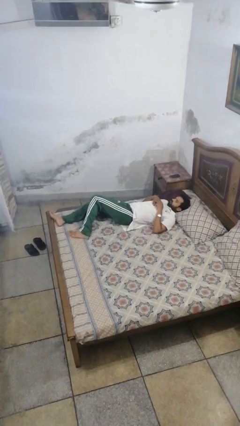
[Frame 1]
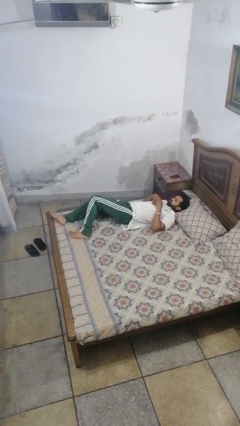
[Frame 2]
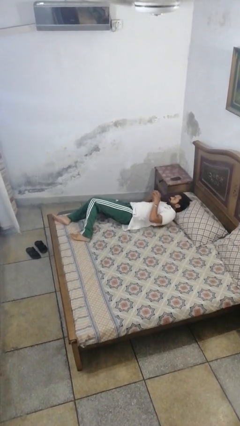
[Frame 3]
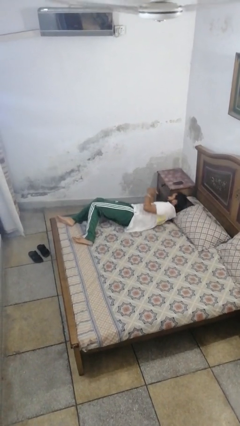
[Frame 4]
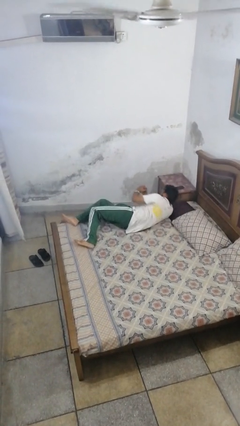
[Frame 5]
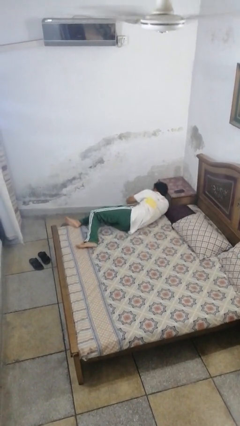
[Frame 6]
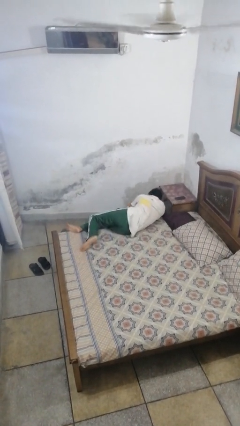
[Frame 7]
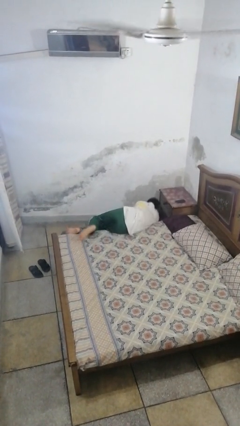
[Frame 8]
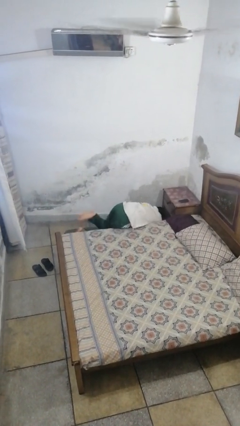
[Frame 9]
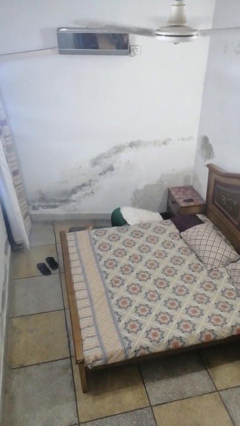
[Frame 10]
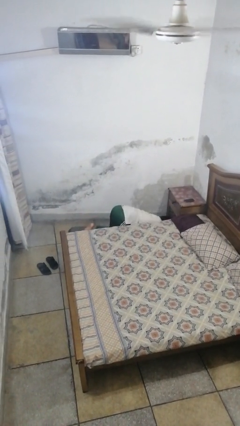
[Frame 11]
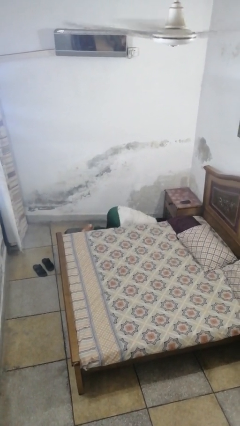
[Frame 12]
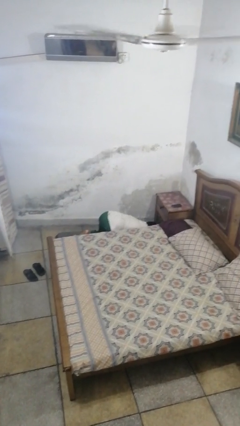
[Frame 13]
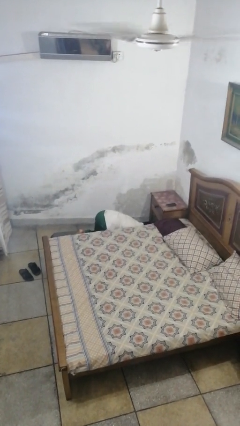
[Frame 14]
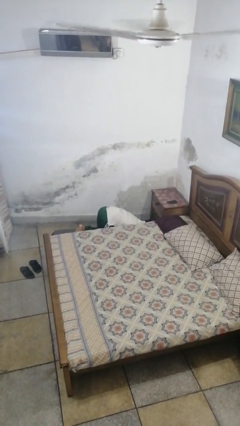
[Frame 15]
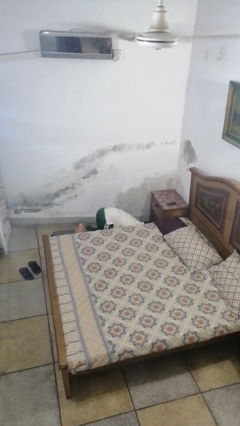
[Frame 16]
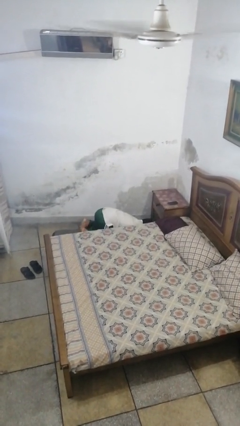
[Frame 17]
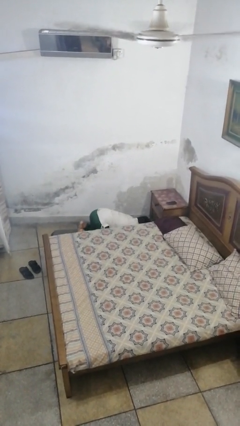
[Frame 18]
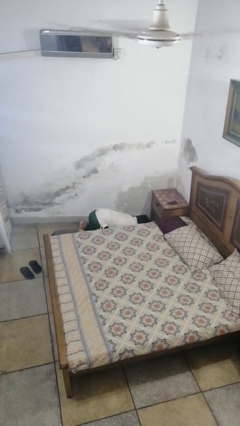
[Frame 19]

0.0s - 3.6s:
person falls from bed

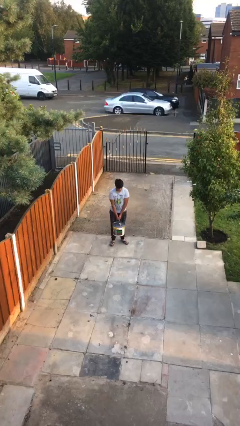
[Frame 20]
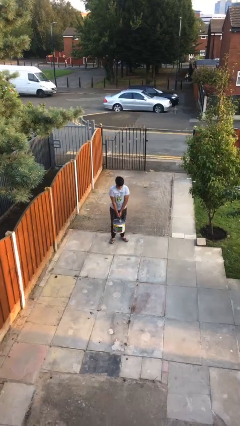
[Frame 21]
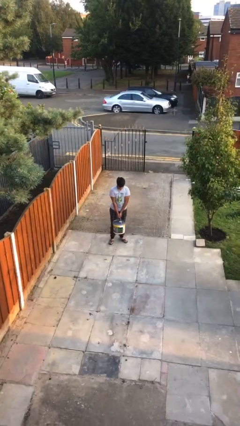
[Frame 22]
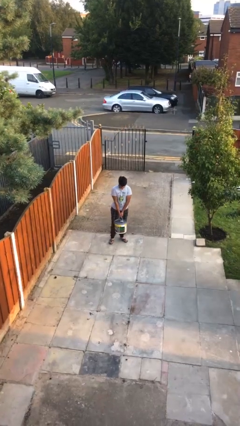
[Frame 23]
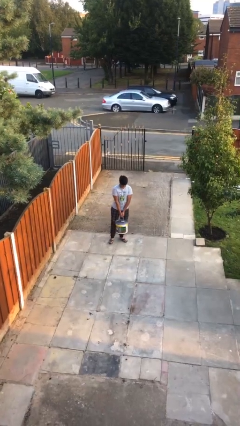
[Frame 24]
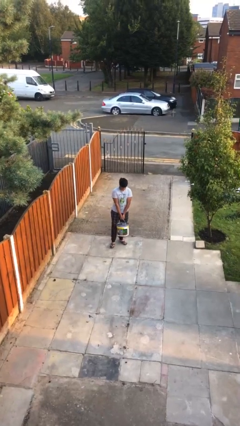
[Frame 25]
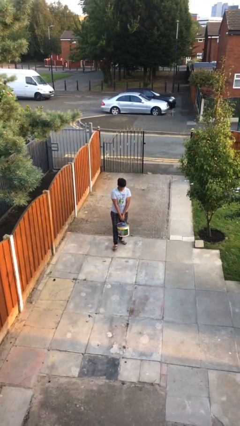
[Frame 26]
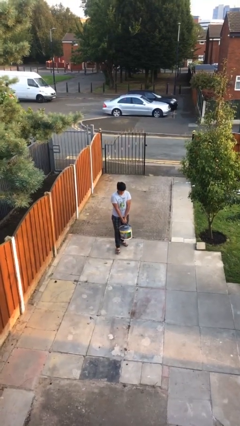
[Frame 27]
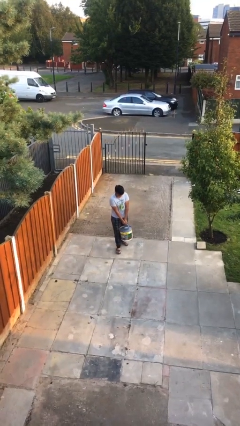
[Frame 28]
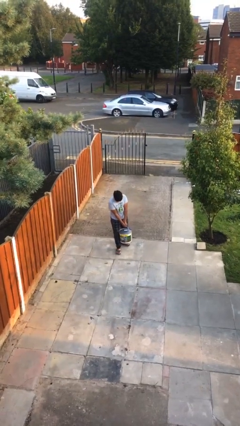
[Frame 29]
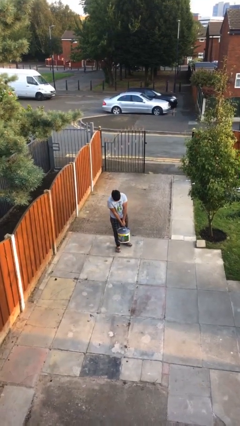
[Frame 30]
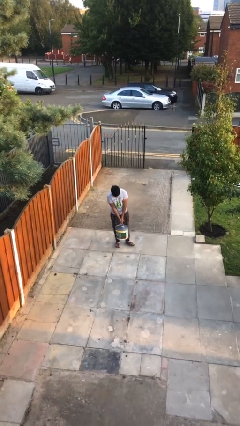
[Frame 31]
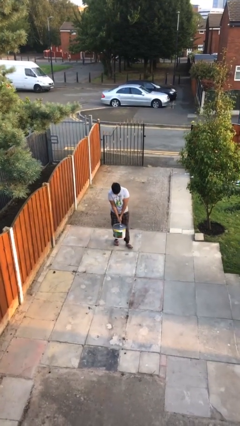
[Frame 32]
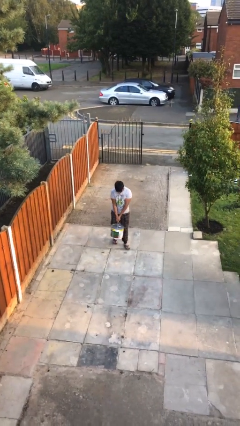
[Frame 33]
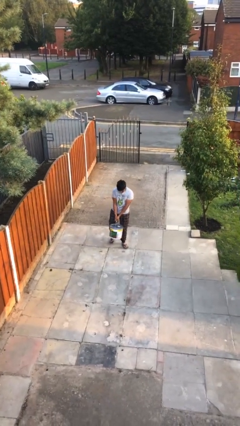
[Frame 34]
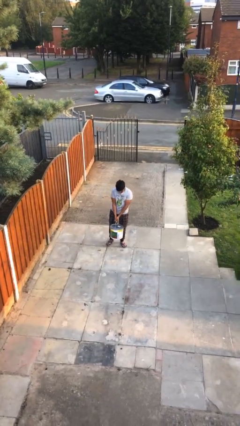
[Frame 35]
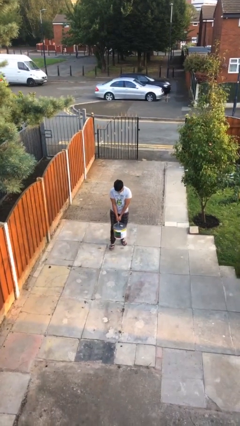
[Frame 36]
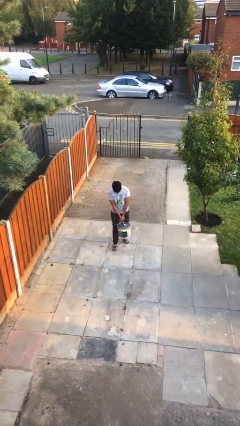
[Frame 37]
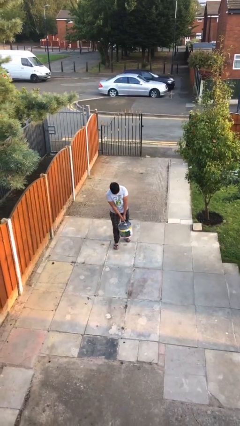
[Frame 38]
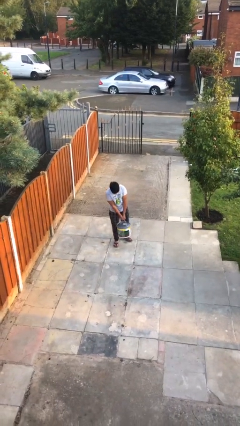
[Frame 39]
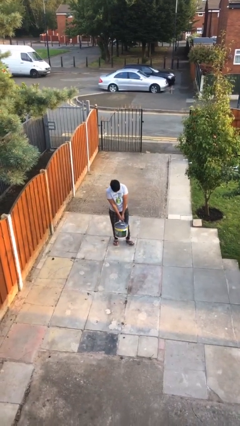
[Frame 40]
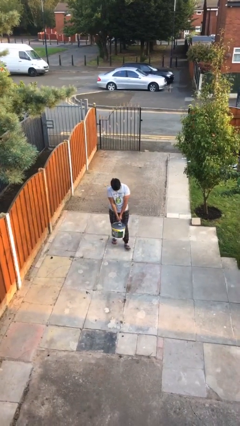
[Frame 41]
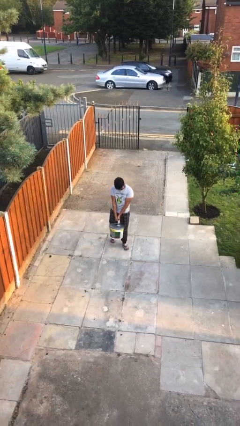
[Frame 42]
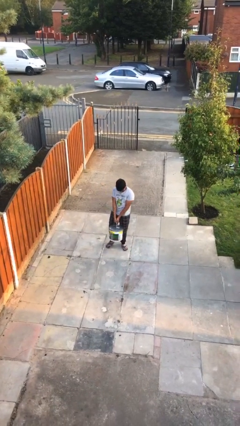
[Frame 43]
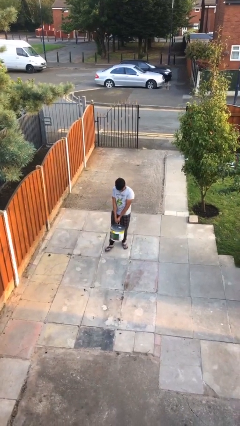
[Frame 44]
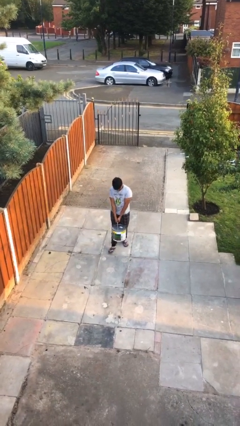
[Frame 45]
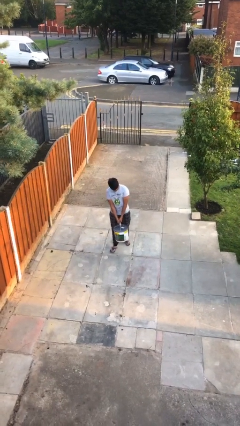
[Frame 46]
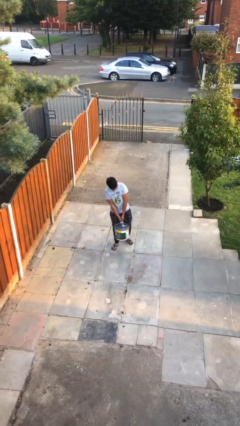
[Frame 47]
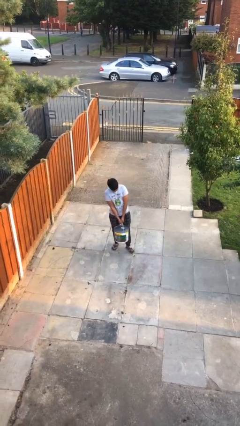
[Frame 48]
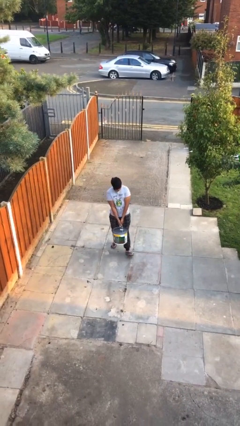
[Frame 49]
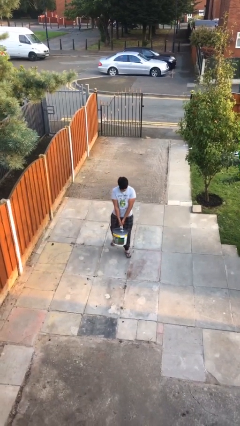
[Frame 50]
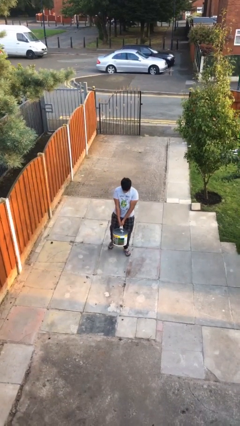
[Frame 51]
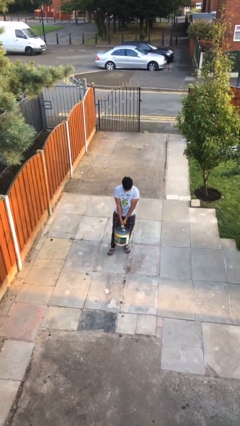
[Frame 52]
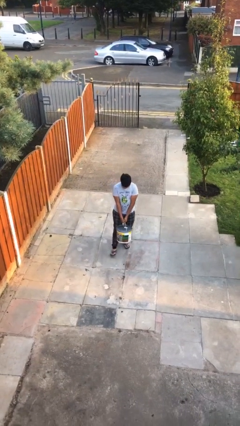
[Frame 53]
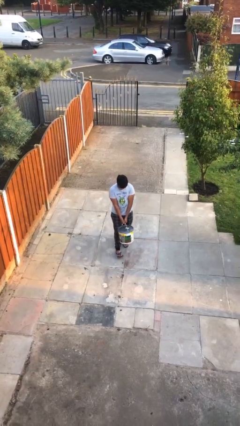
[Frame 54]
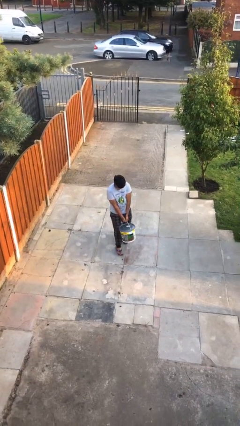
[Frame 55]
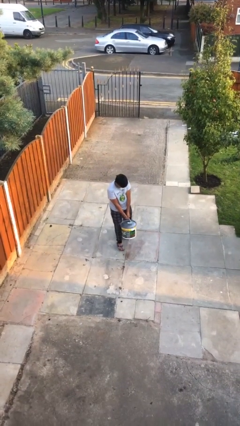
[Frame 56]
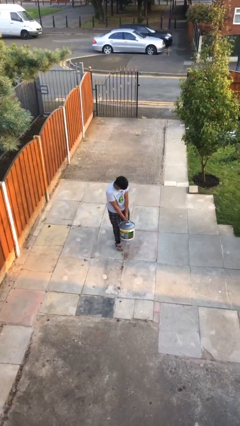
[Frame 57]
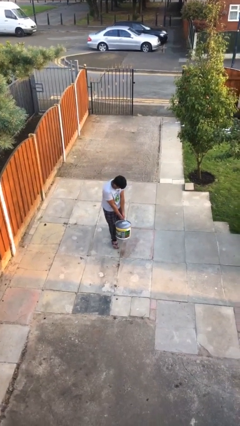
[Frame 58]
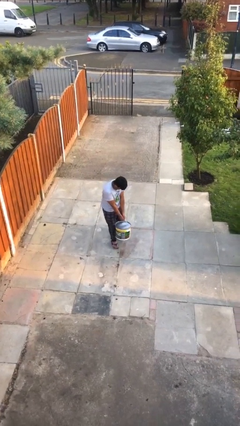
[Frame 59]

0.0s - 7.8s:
person carries heavy object

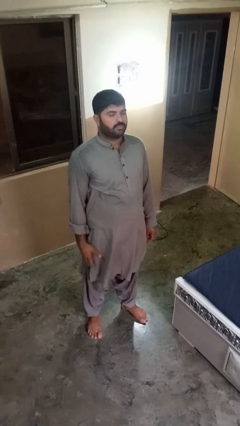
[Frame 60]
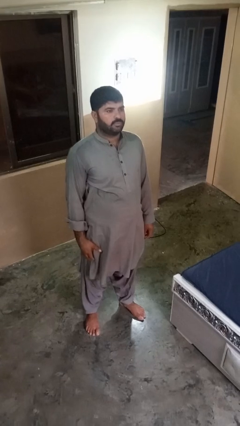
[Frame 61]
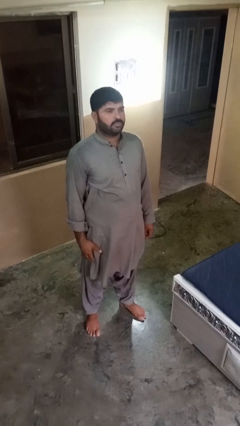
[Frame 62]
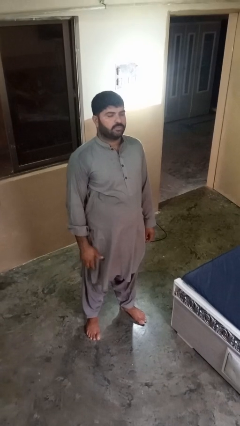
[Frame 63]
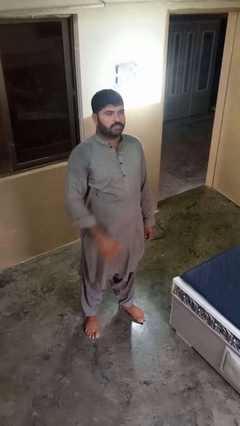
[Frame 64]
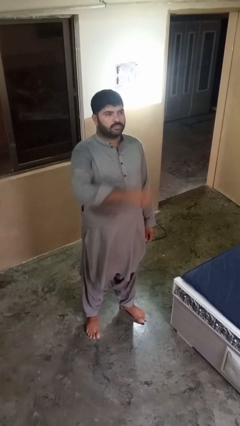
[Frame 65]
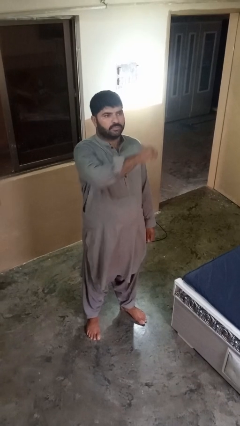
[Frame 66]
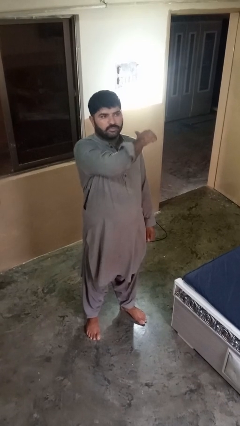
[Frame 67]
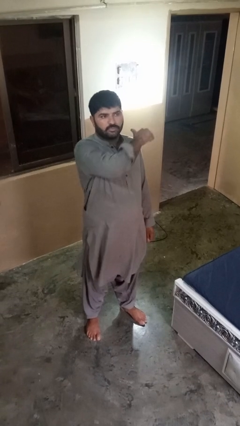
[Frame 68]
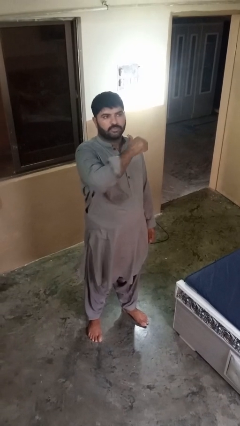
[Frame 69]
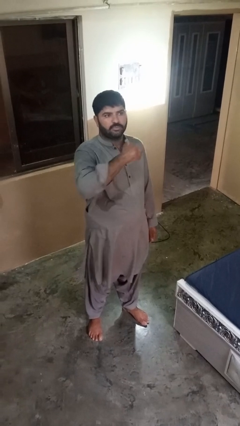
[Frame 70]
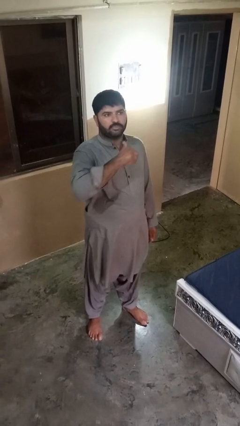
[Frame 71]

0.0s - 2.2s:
person gestures cut

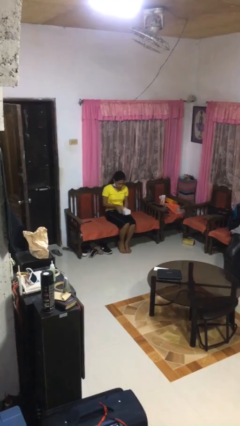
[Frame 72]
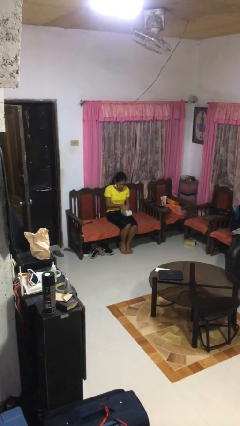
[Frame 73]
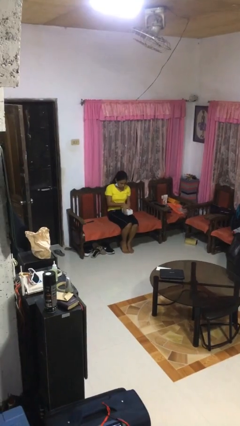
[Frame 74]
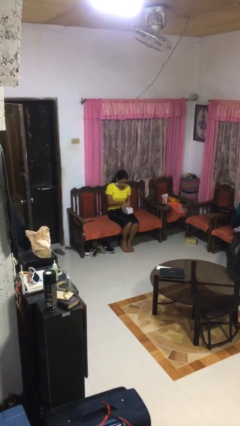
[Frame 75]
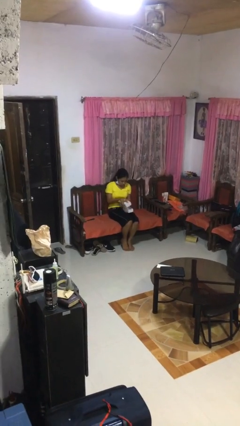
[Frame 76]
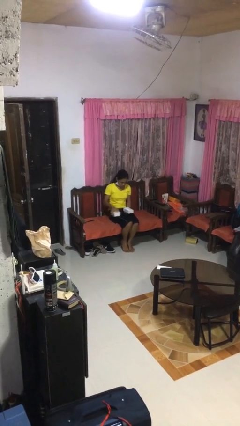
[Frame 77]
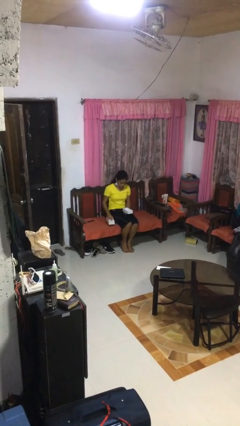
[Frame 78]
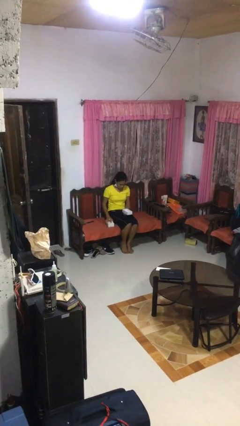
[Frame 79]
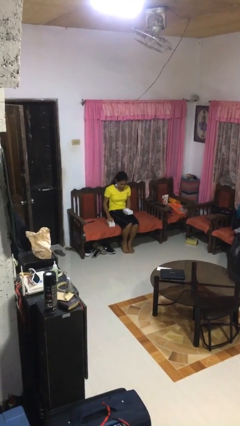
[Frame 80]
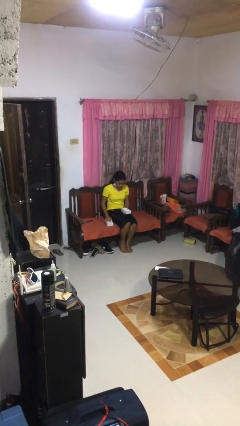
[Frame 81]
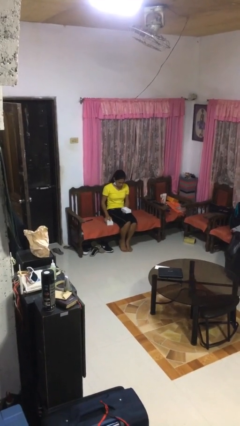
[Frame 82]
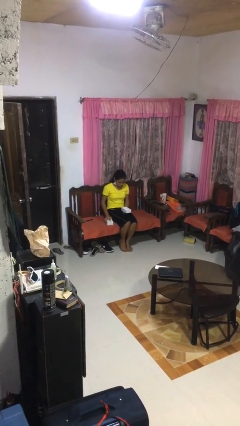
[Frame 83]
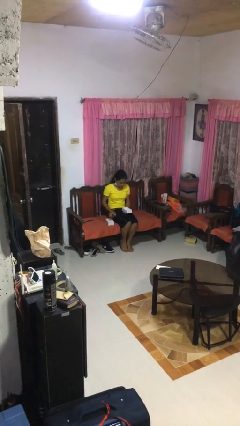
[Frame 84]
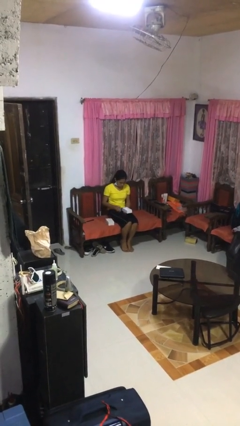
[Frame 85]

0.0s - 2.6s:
person opens jewelry box

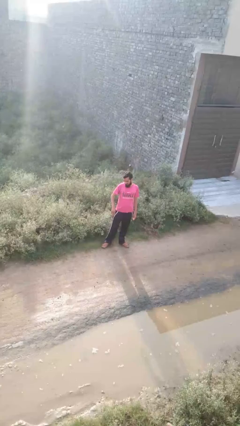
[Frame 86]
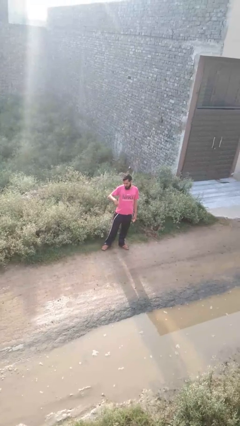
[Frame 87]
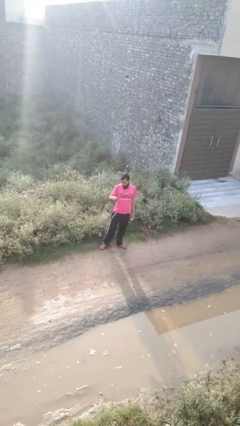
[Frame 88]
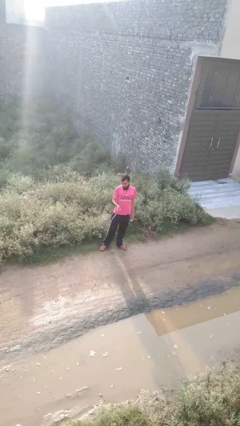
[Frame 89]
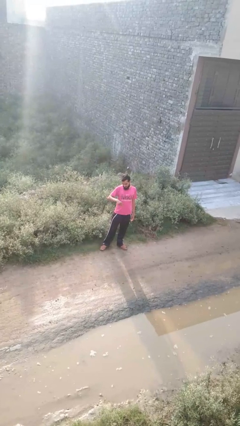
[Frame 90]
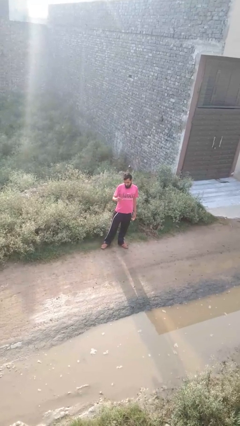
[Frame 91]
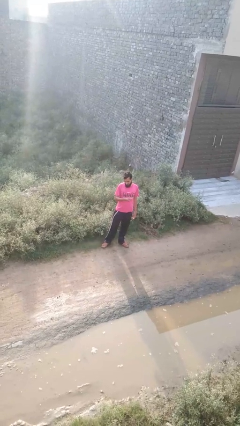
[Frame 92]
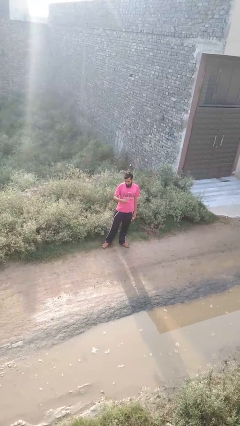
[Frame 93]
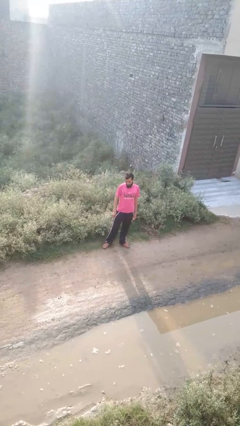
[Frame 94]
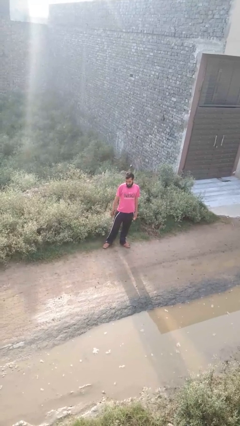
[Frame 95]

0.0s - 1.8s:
person snaps fingers
